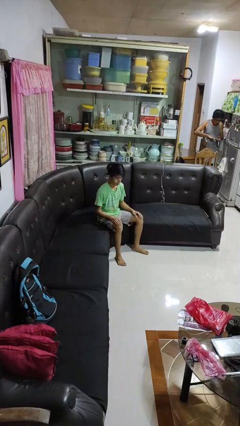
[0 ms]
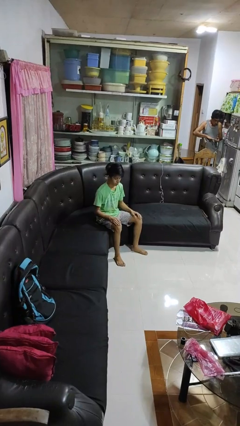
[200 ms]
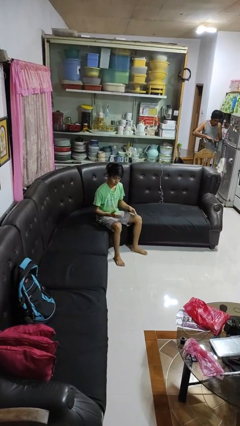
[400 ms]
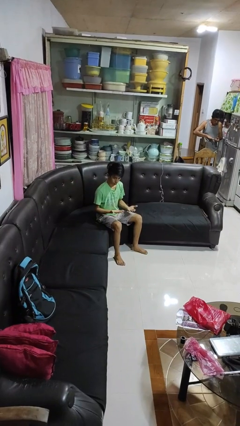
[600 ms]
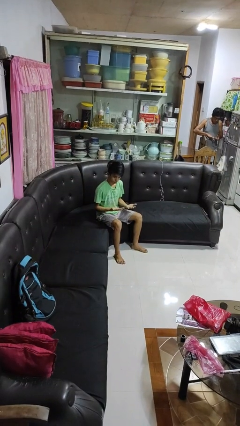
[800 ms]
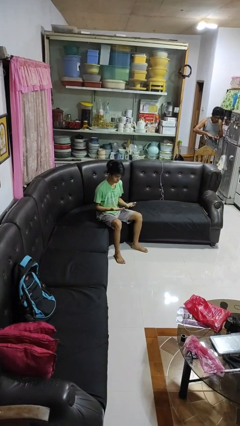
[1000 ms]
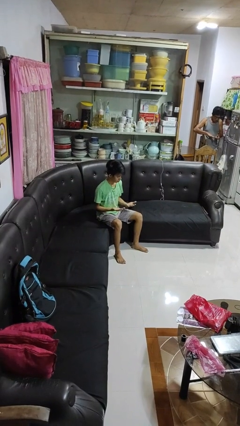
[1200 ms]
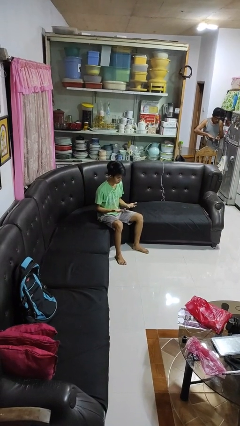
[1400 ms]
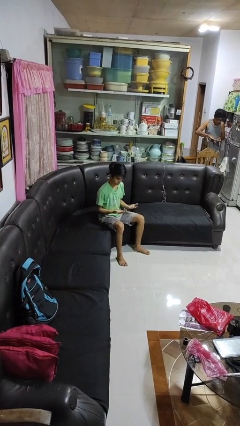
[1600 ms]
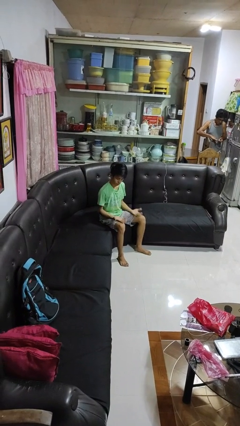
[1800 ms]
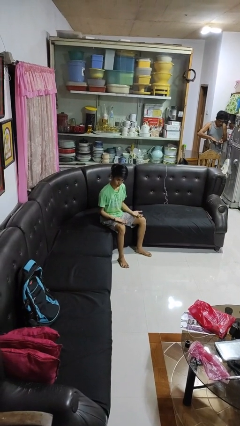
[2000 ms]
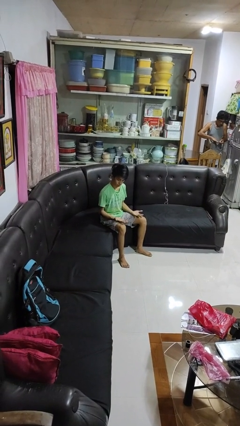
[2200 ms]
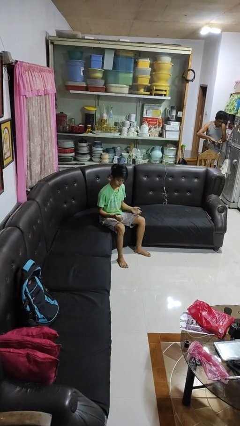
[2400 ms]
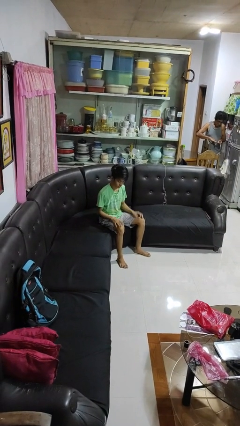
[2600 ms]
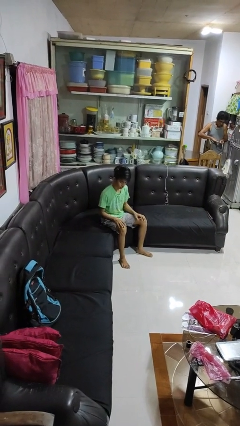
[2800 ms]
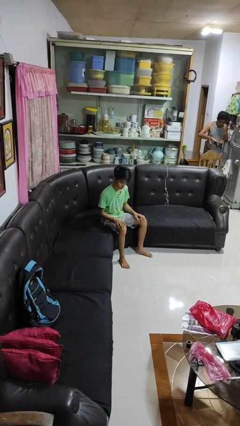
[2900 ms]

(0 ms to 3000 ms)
person looks at hands in lap

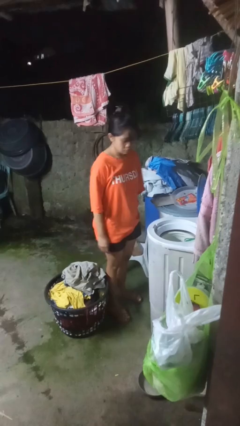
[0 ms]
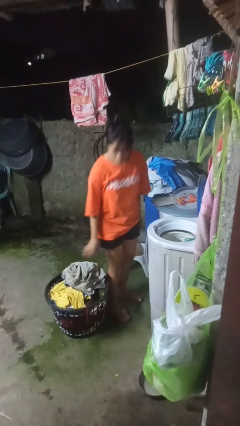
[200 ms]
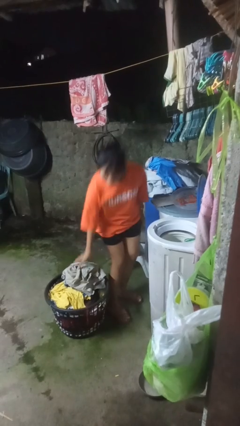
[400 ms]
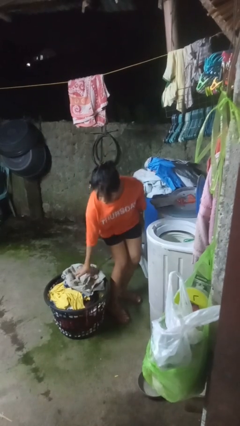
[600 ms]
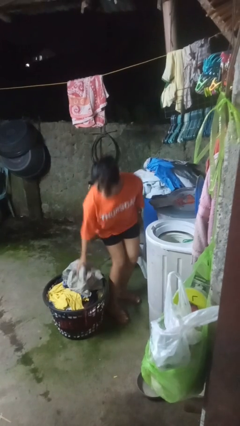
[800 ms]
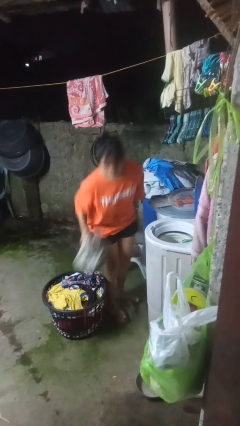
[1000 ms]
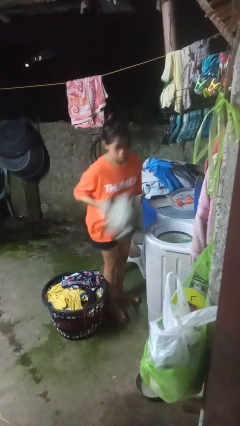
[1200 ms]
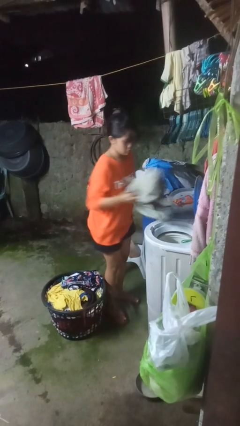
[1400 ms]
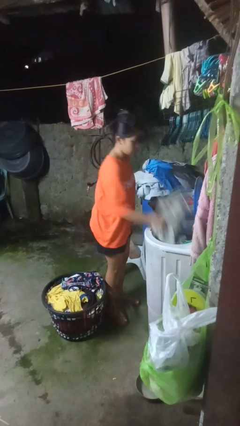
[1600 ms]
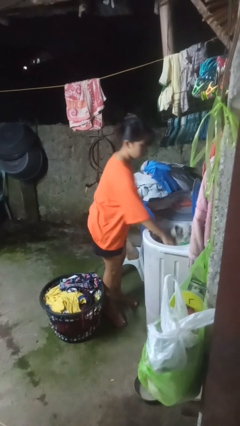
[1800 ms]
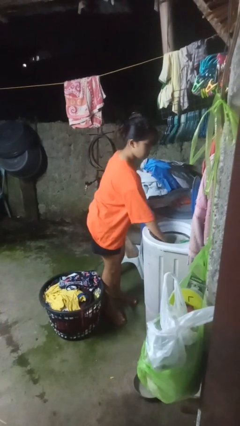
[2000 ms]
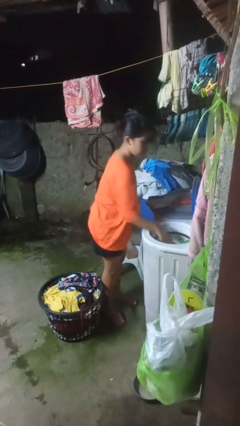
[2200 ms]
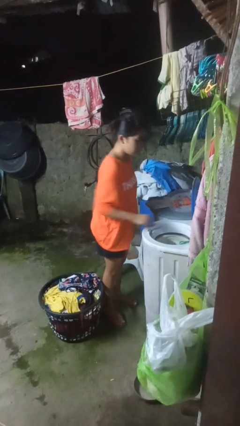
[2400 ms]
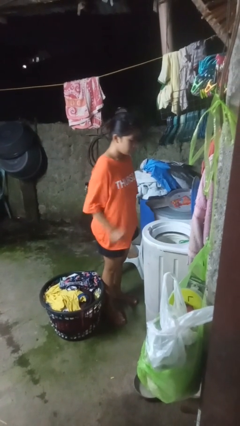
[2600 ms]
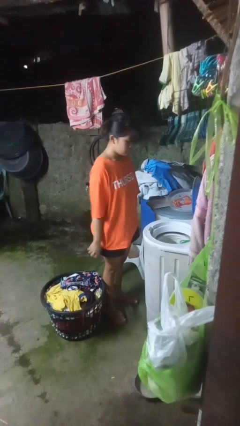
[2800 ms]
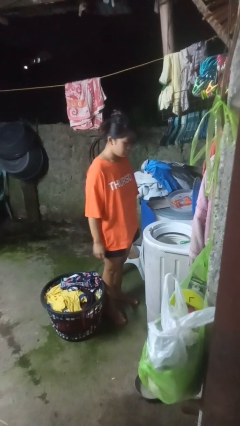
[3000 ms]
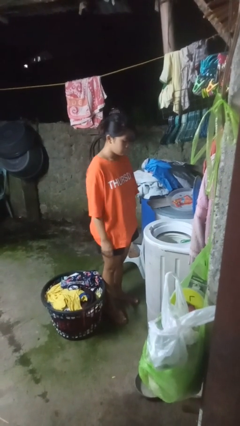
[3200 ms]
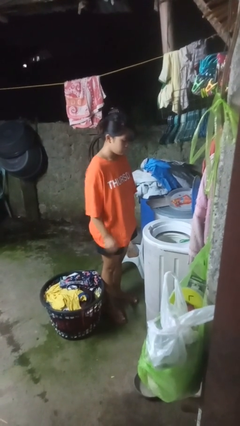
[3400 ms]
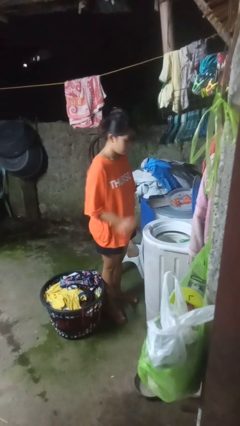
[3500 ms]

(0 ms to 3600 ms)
person loads dryer

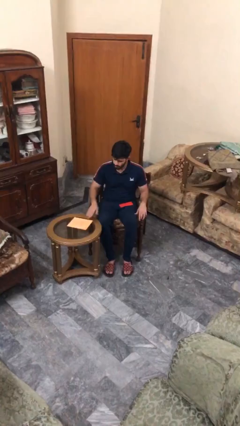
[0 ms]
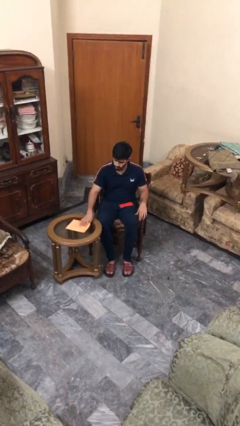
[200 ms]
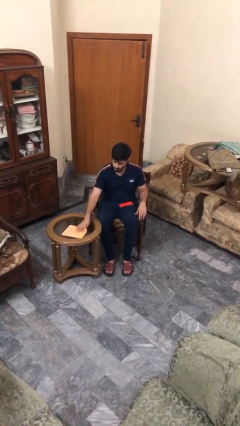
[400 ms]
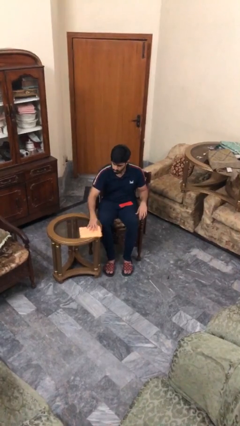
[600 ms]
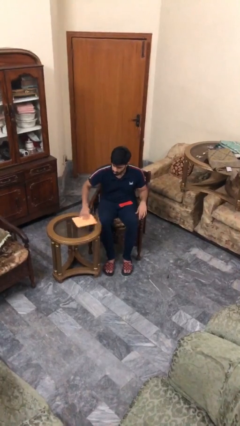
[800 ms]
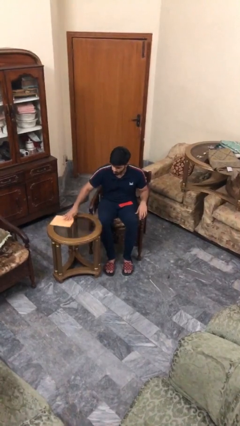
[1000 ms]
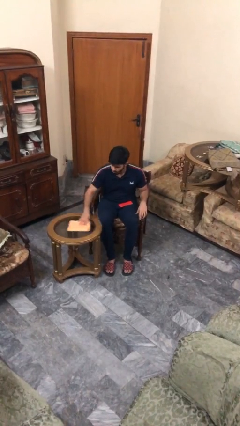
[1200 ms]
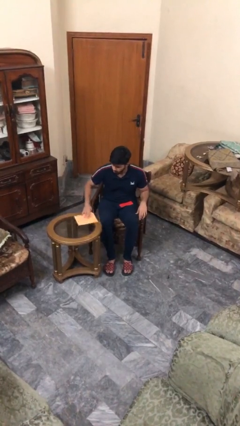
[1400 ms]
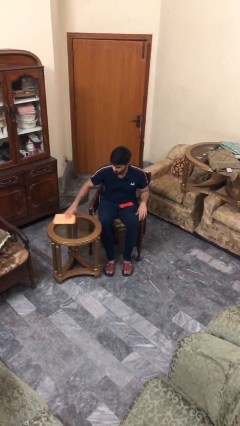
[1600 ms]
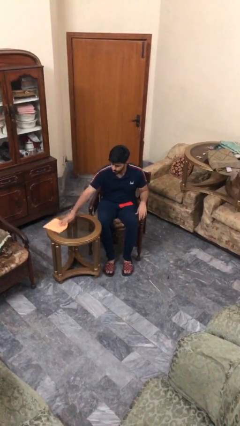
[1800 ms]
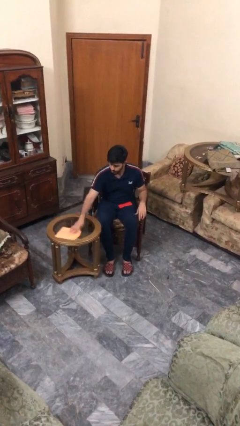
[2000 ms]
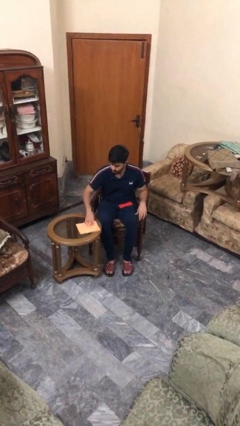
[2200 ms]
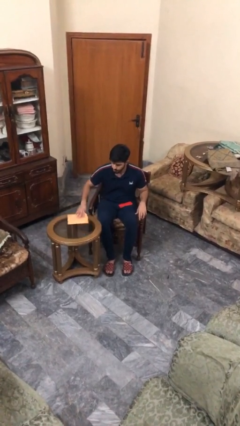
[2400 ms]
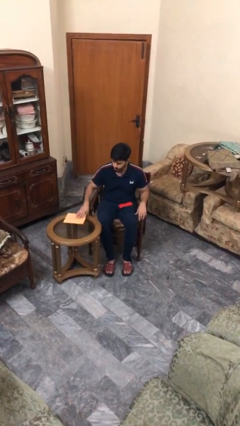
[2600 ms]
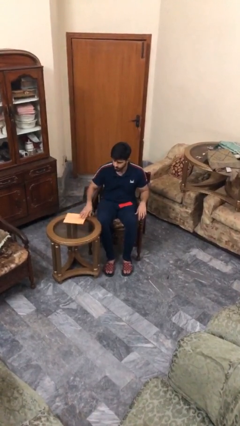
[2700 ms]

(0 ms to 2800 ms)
person cleans table with rag

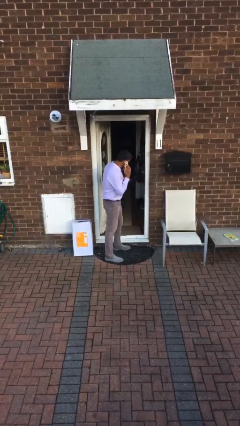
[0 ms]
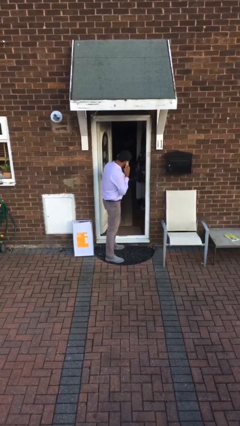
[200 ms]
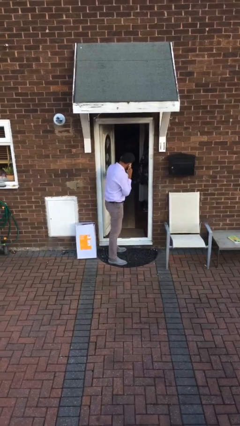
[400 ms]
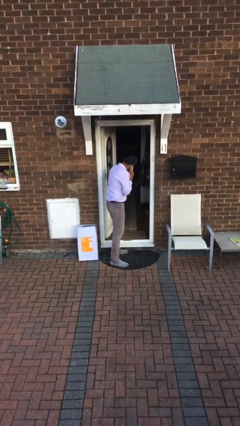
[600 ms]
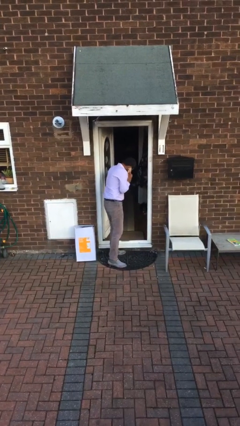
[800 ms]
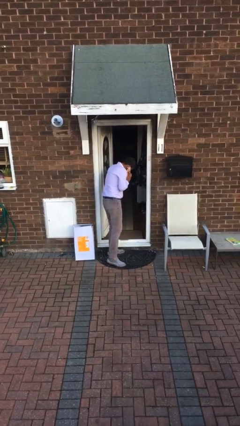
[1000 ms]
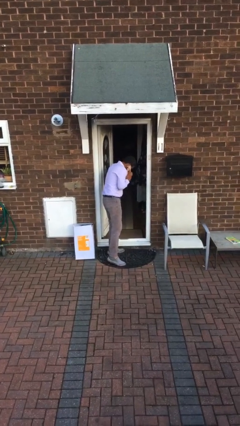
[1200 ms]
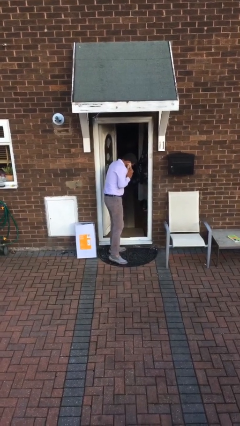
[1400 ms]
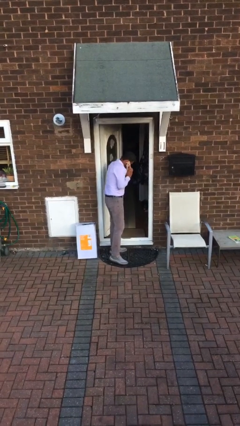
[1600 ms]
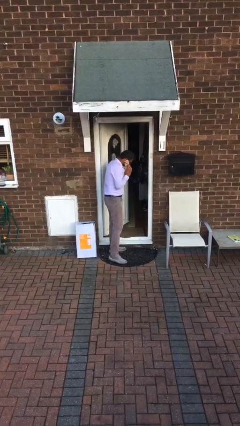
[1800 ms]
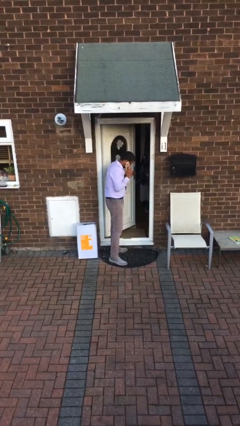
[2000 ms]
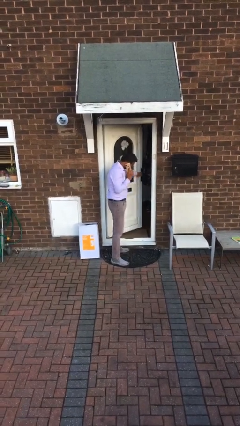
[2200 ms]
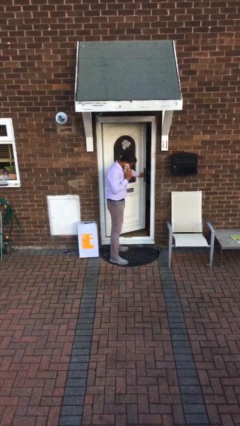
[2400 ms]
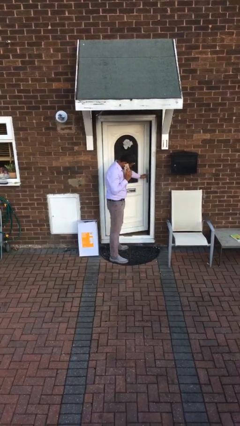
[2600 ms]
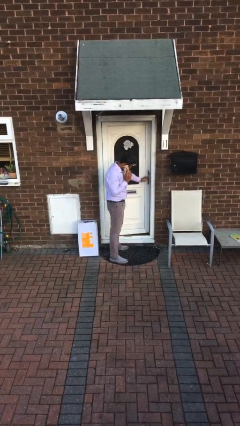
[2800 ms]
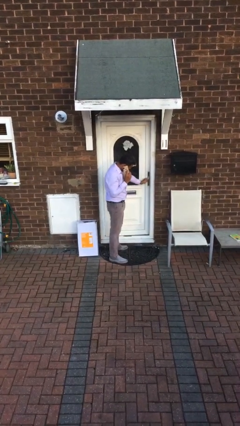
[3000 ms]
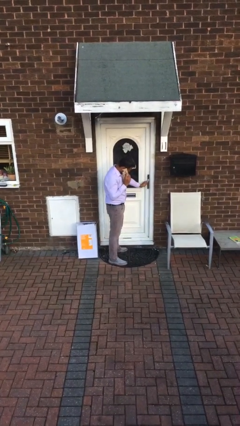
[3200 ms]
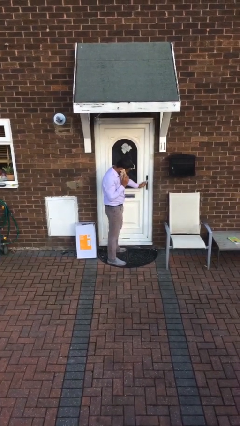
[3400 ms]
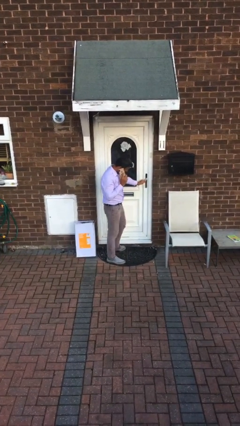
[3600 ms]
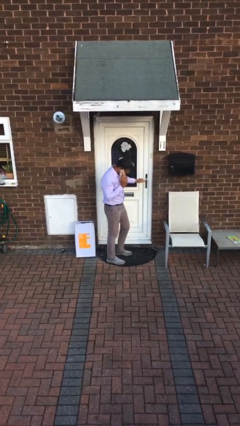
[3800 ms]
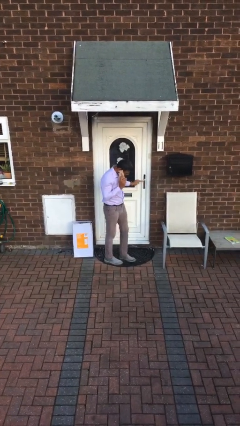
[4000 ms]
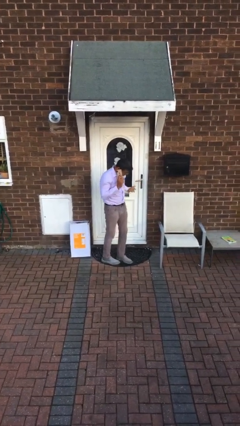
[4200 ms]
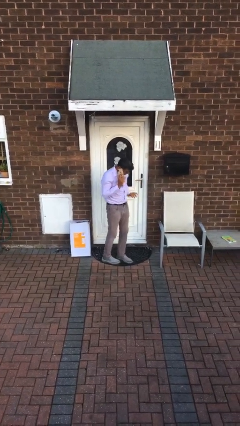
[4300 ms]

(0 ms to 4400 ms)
person closes facility door

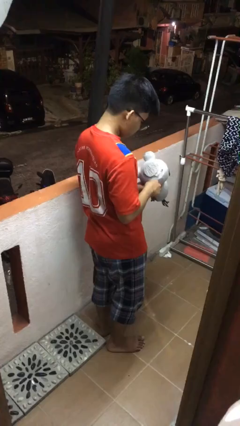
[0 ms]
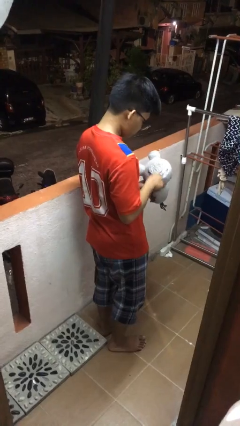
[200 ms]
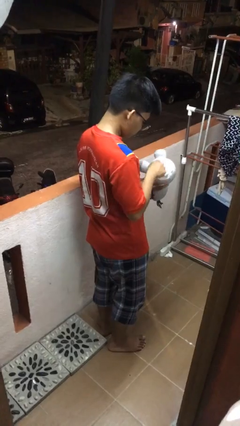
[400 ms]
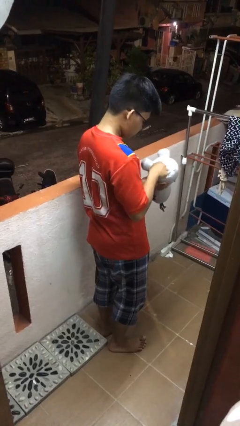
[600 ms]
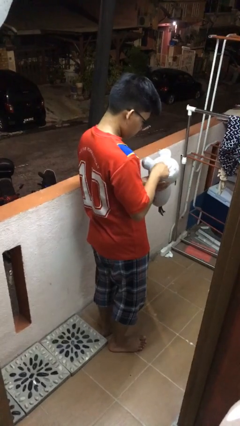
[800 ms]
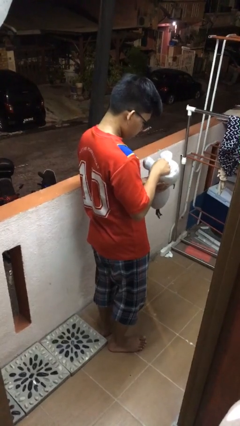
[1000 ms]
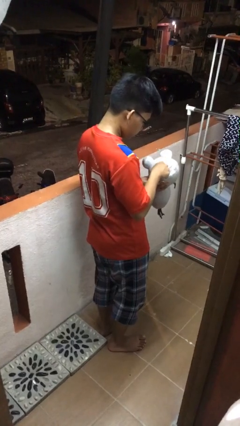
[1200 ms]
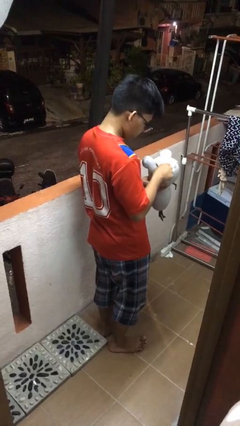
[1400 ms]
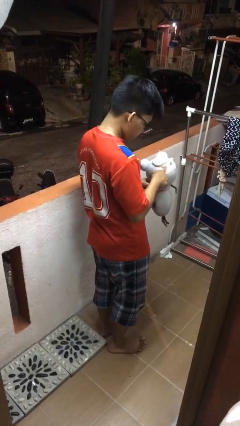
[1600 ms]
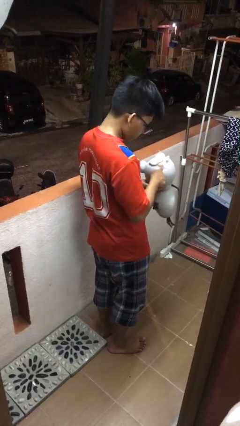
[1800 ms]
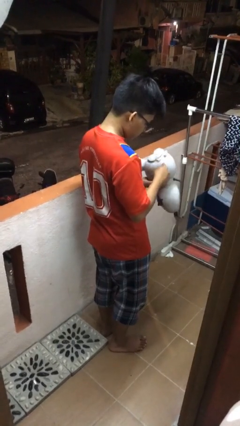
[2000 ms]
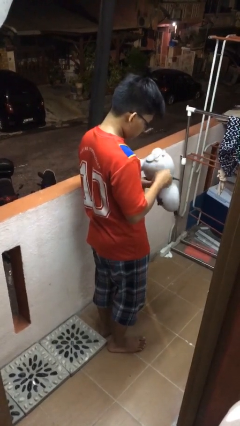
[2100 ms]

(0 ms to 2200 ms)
person taps object with finger

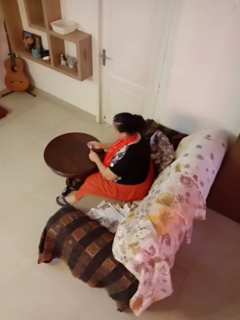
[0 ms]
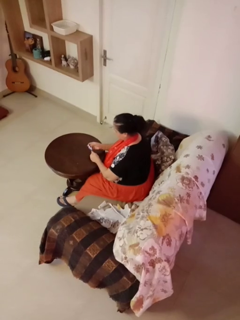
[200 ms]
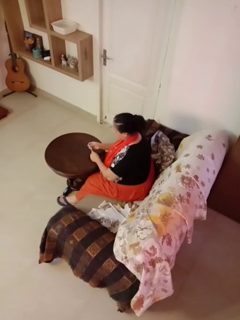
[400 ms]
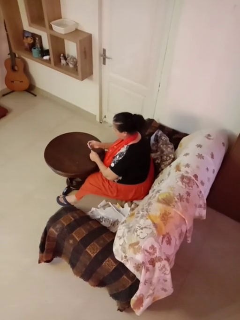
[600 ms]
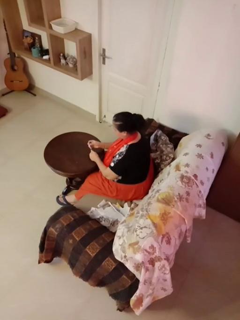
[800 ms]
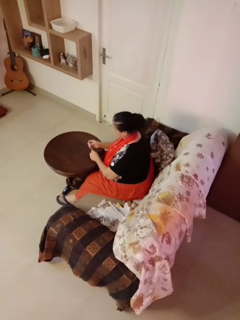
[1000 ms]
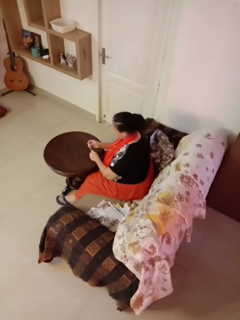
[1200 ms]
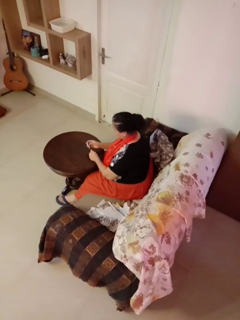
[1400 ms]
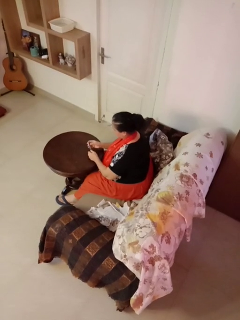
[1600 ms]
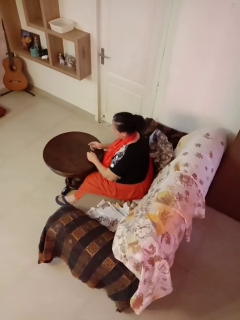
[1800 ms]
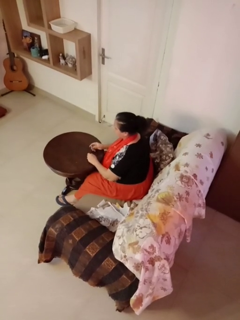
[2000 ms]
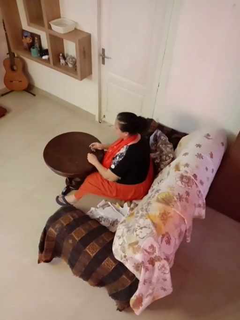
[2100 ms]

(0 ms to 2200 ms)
person clips fingernails
